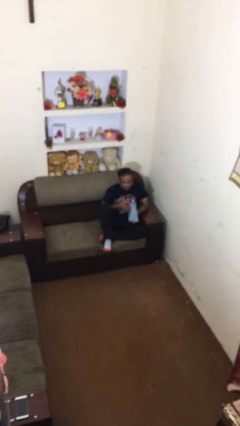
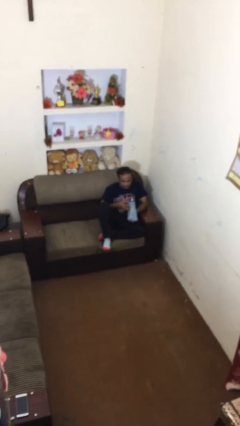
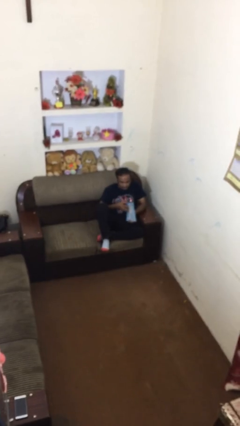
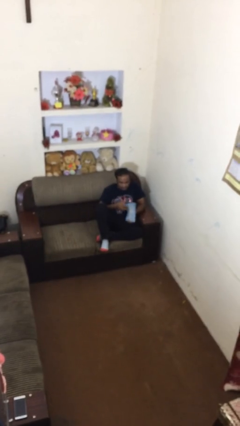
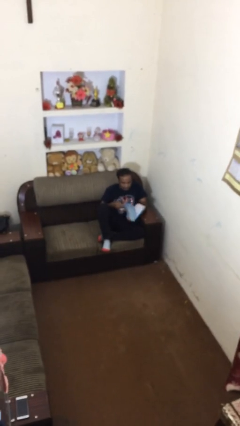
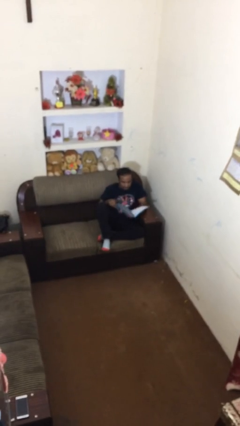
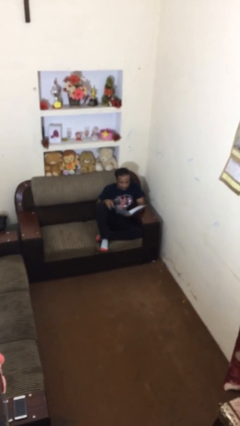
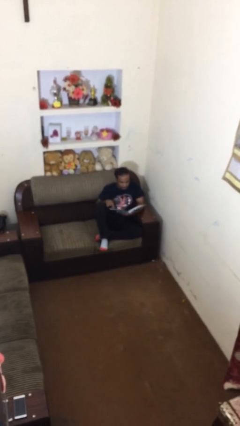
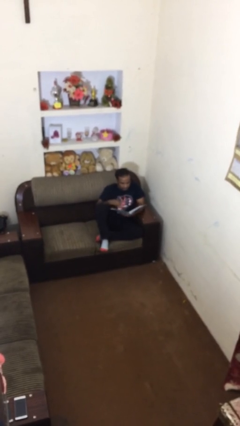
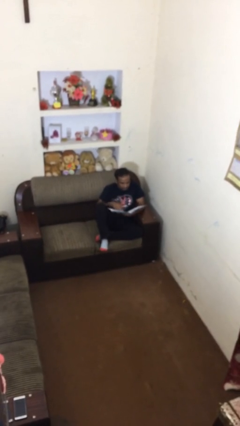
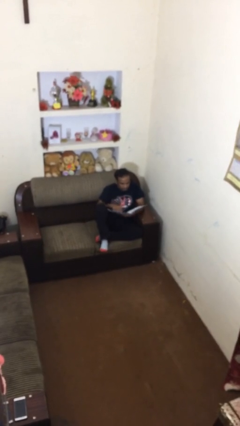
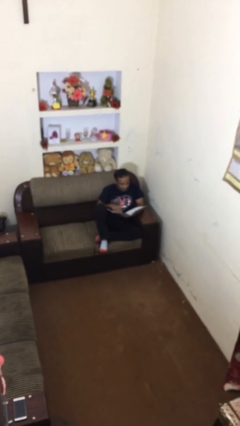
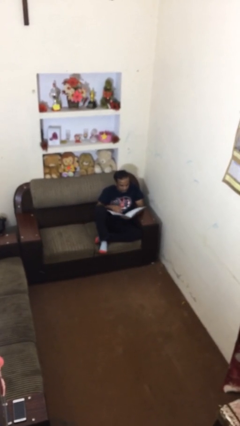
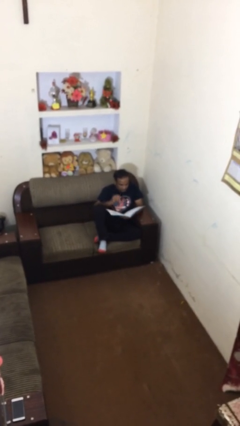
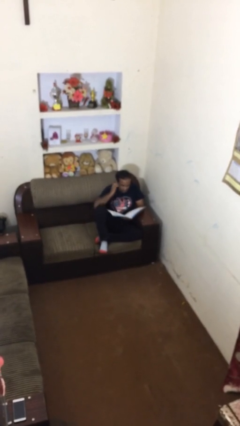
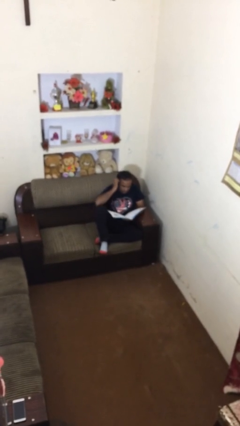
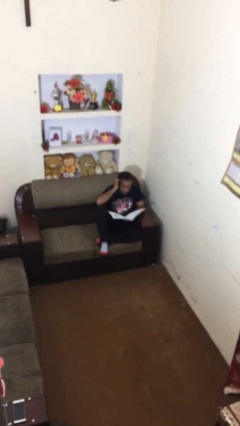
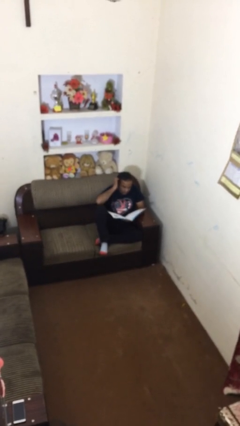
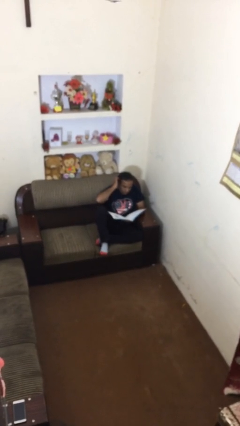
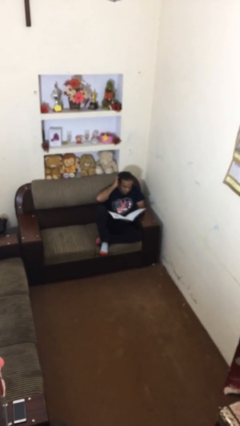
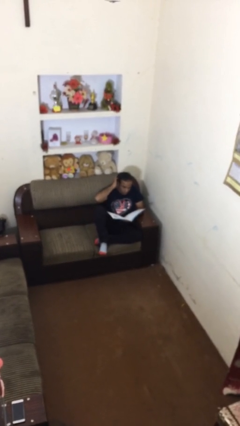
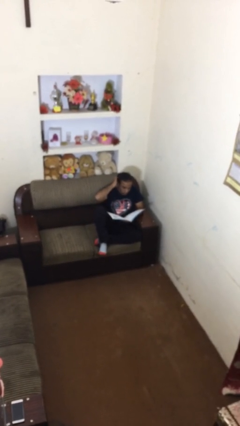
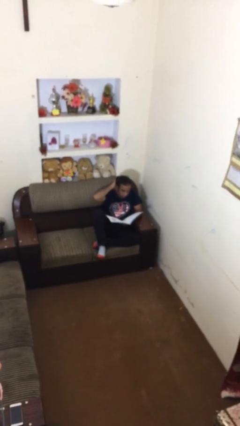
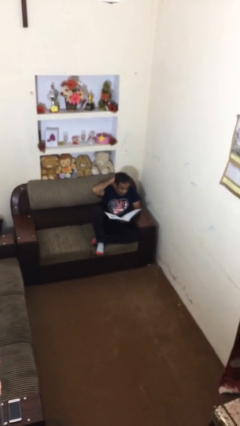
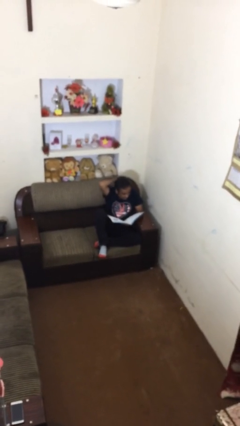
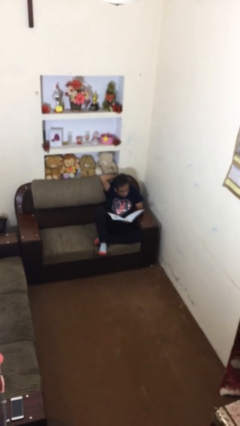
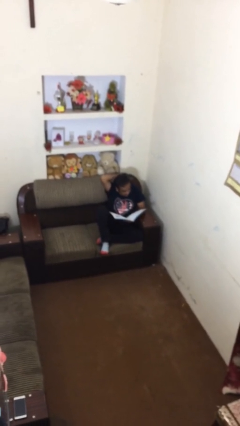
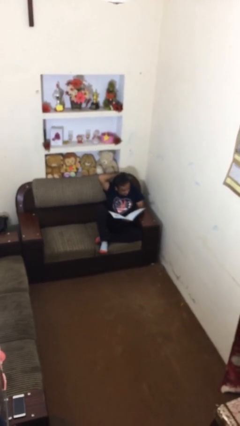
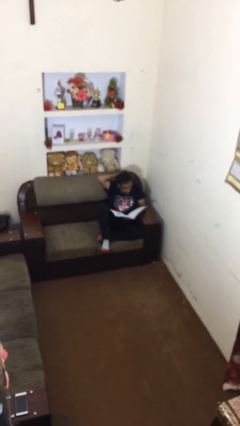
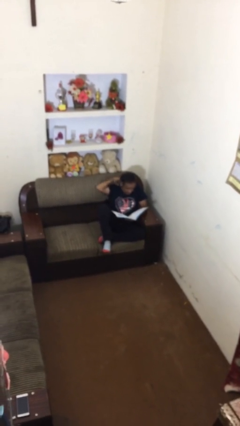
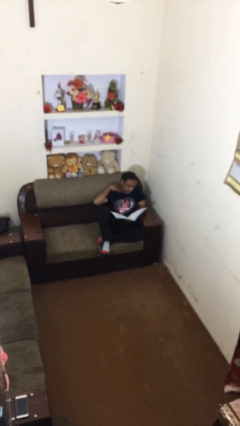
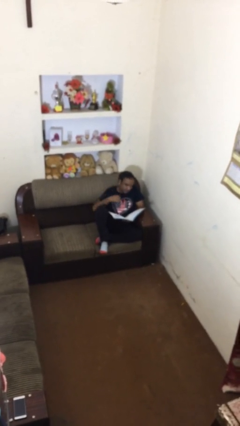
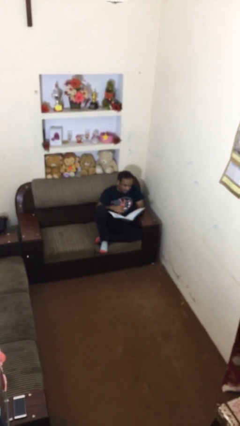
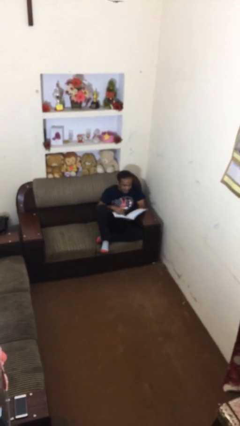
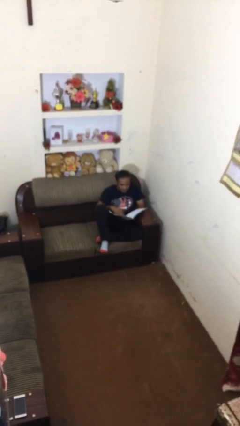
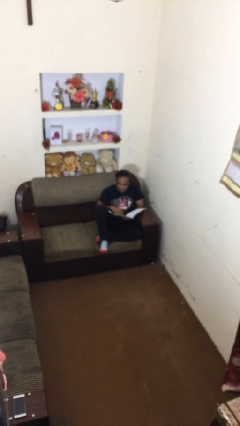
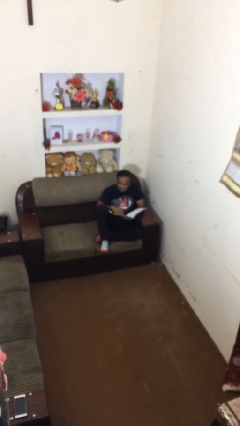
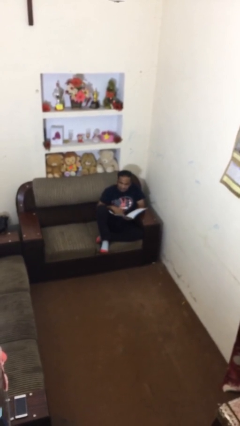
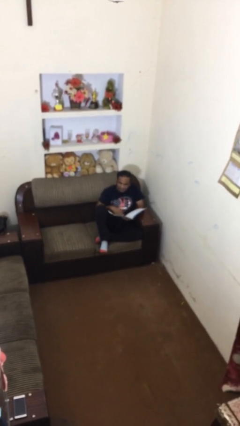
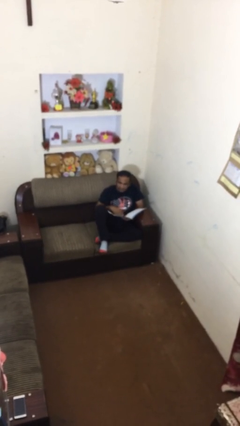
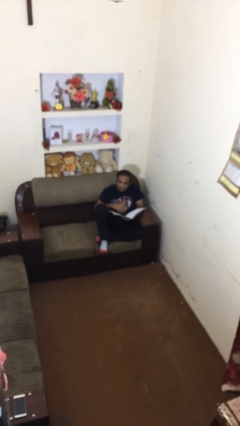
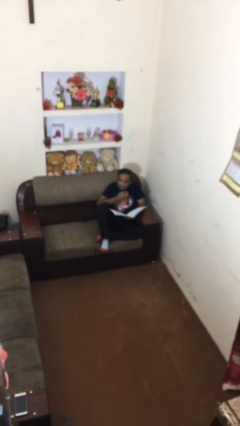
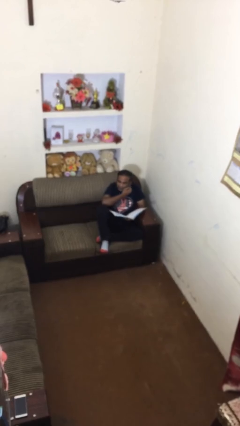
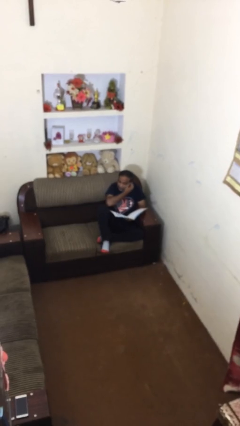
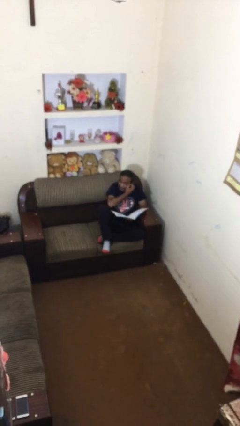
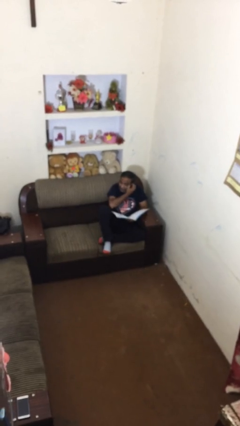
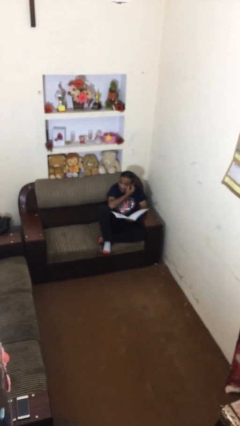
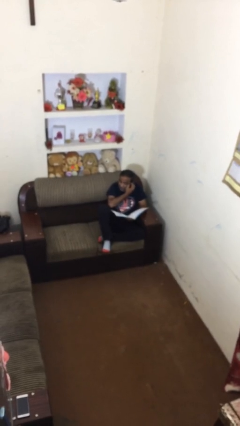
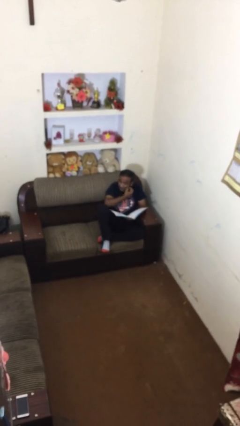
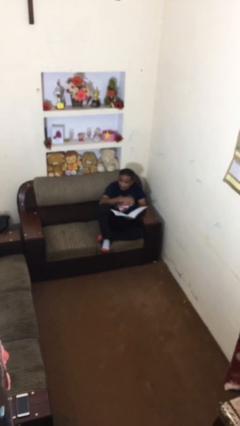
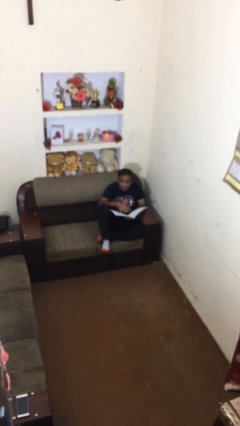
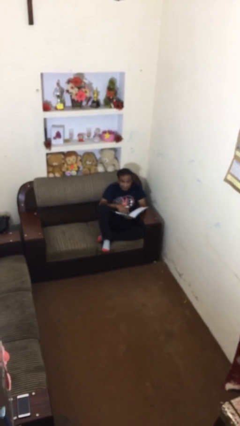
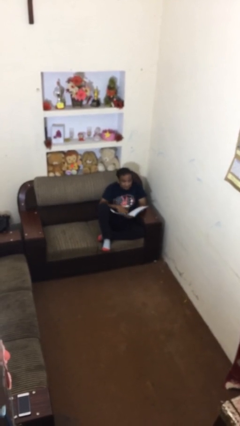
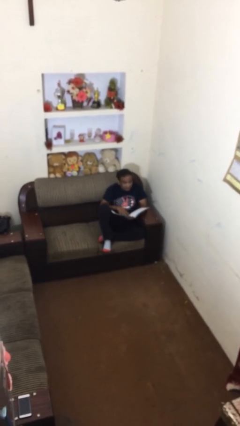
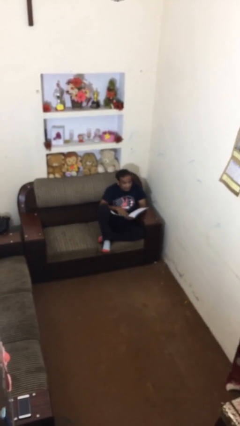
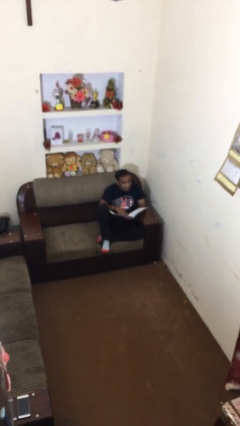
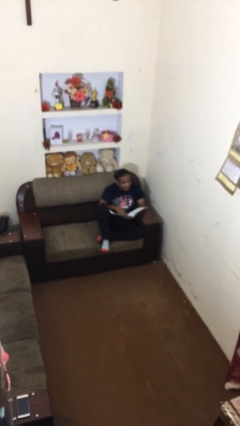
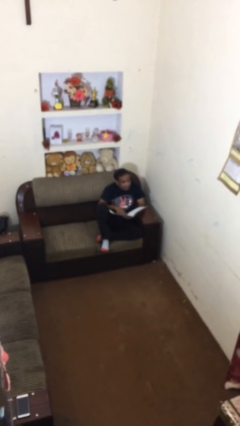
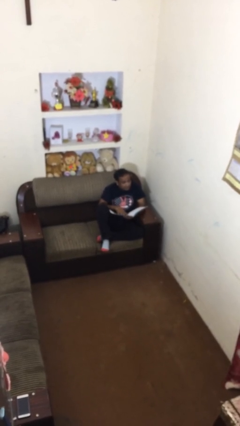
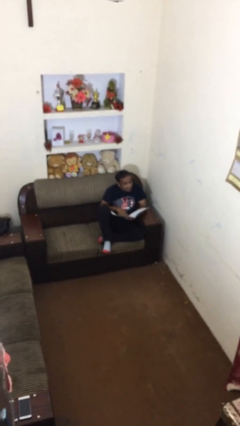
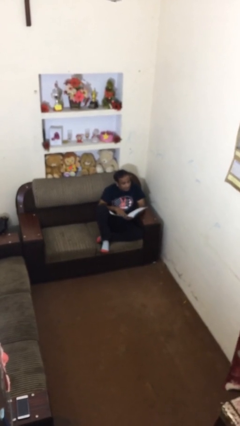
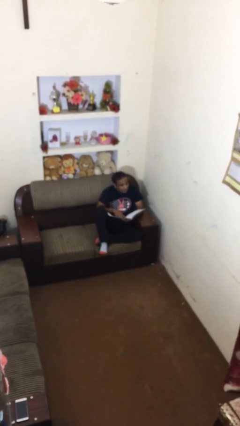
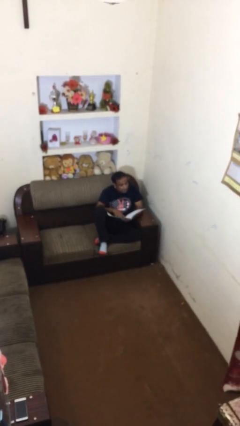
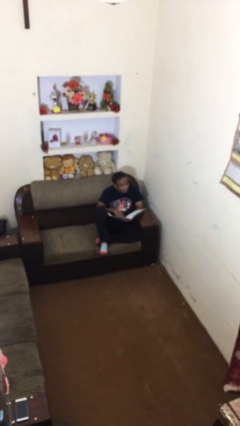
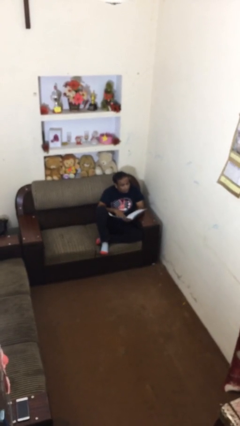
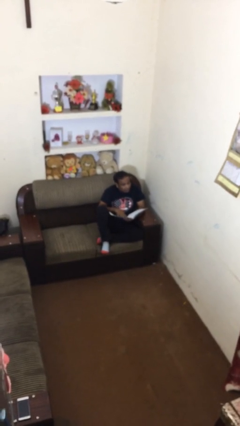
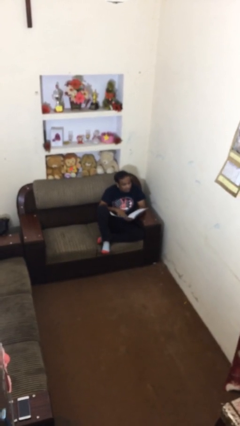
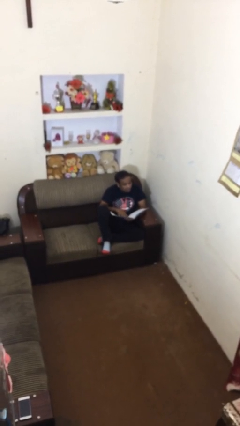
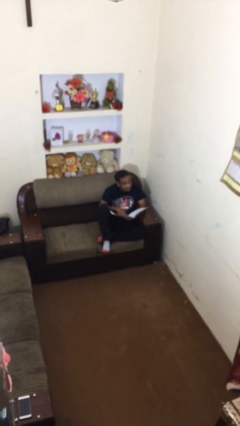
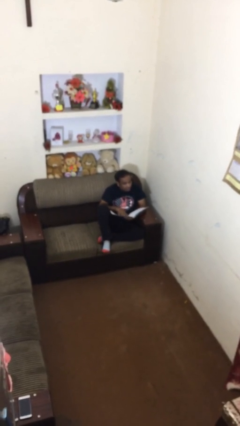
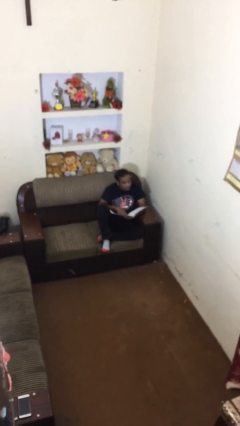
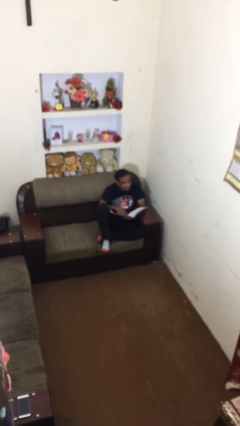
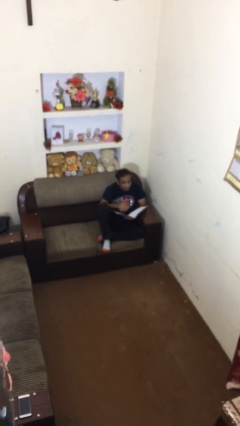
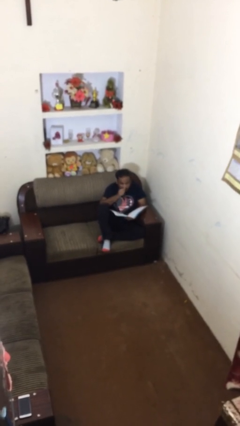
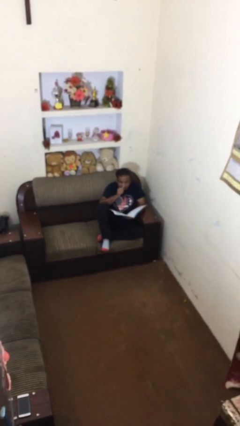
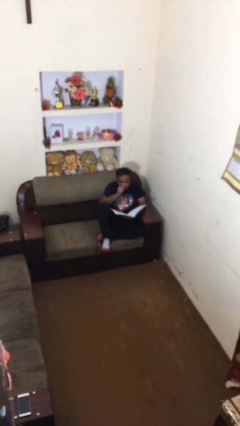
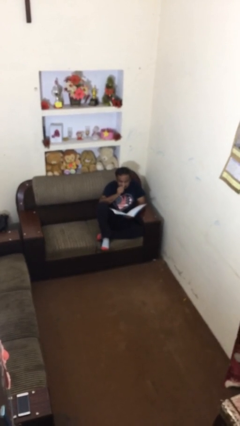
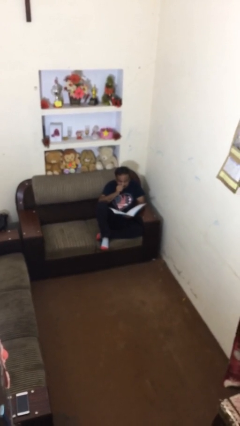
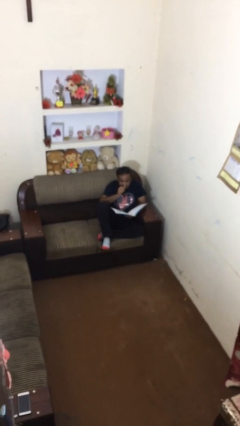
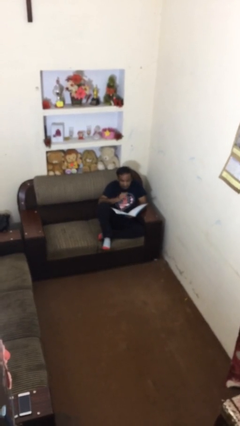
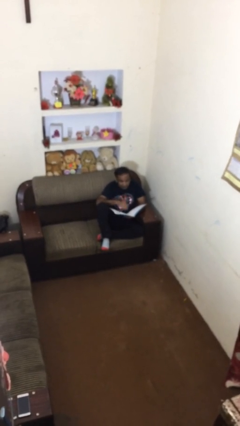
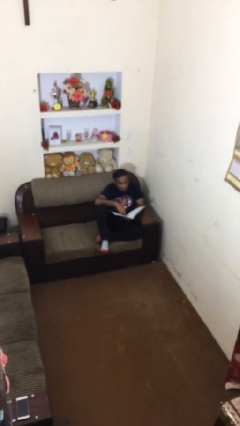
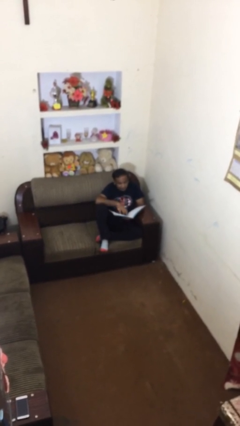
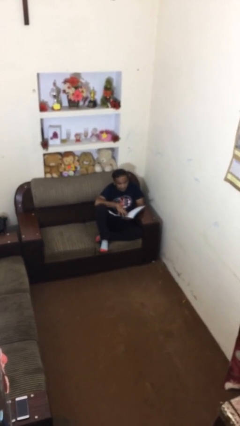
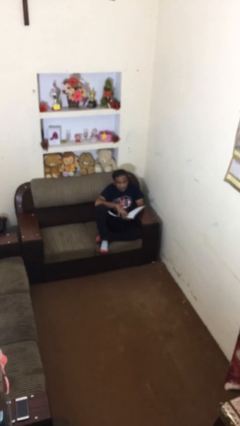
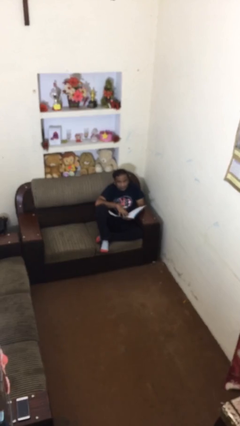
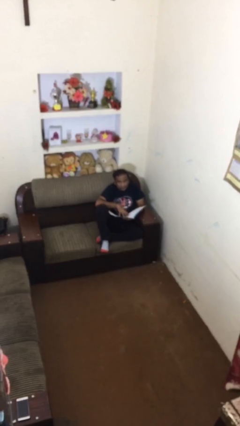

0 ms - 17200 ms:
person reads document

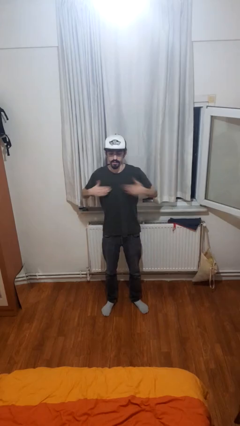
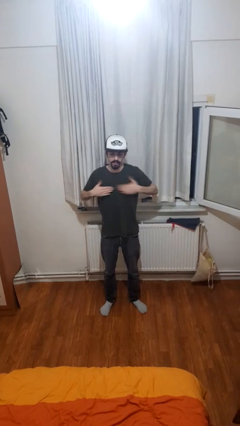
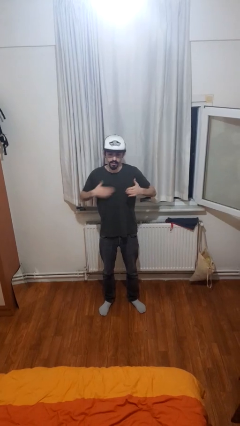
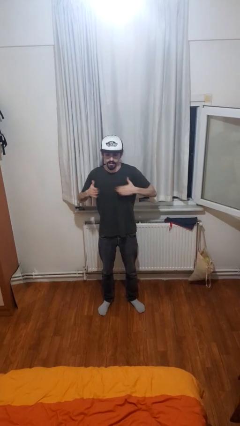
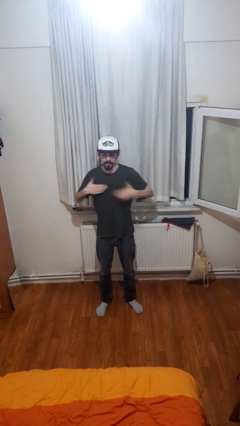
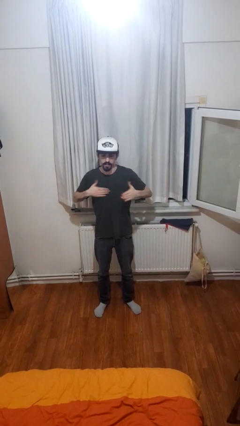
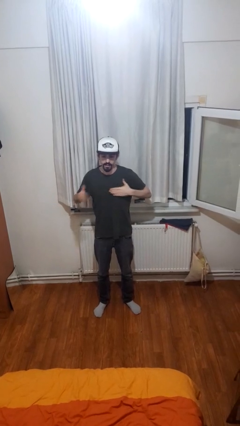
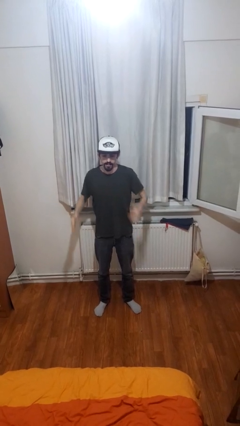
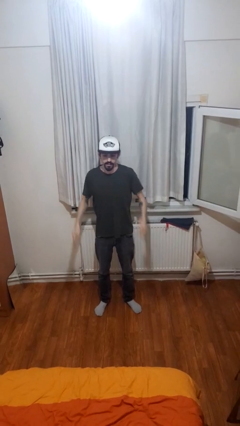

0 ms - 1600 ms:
person drums on chest
